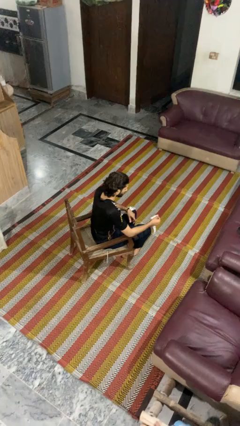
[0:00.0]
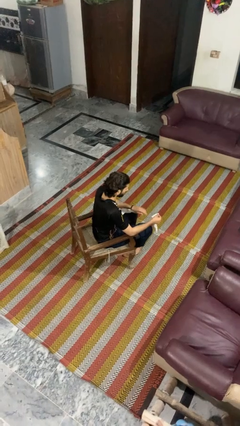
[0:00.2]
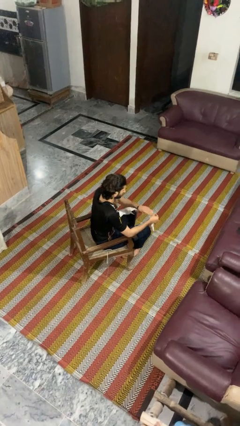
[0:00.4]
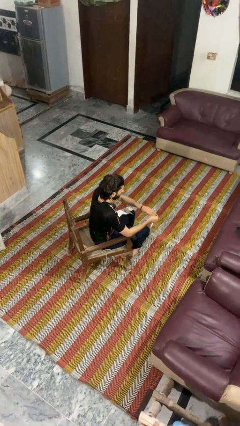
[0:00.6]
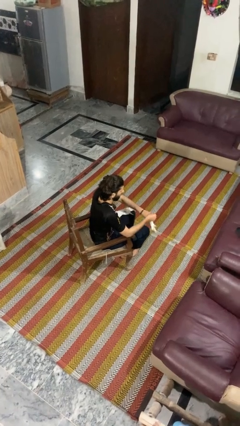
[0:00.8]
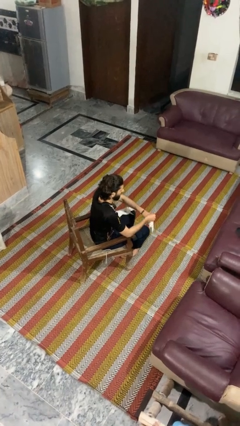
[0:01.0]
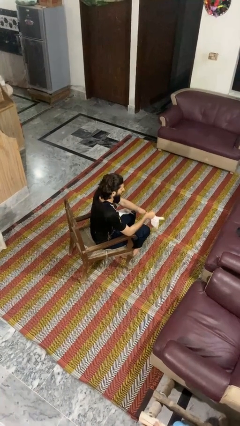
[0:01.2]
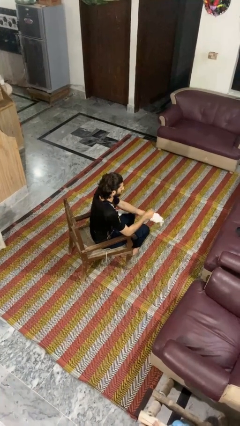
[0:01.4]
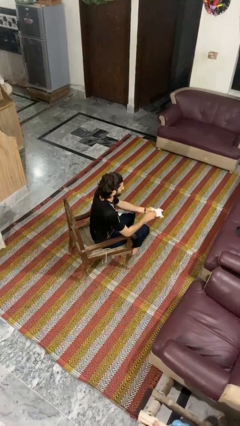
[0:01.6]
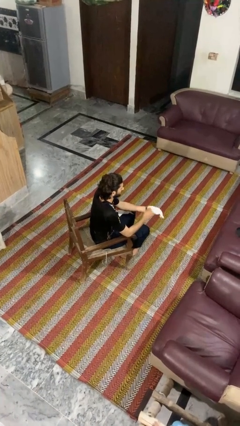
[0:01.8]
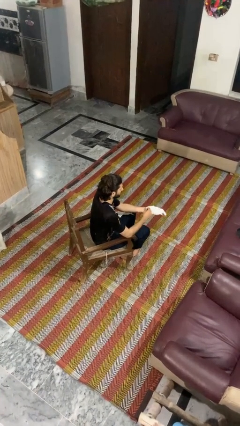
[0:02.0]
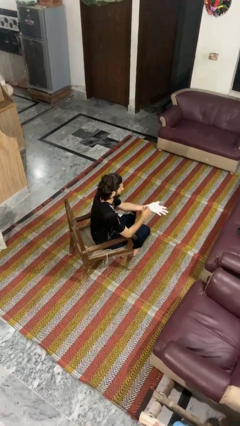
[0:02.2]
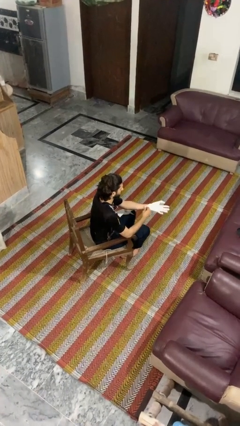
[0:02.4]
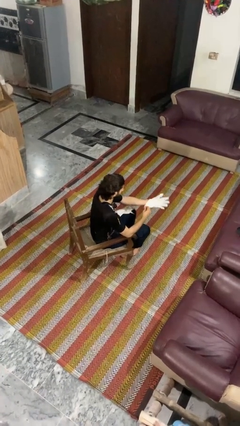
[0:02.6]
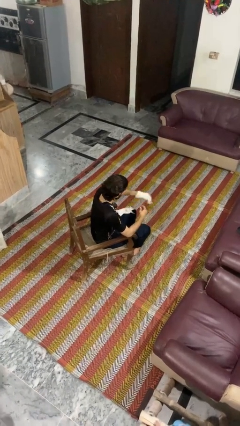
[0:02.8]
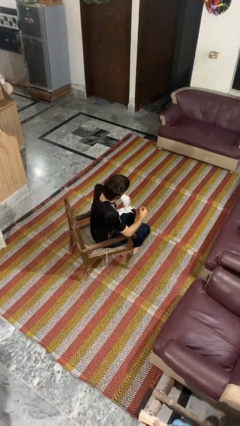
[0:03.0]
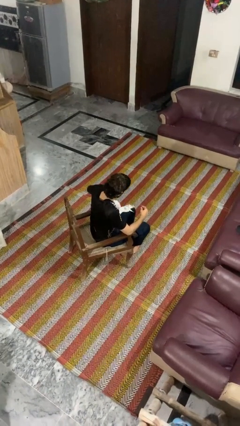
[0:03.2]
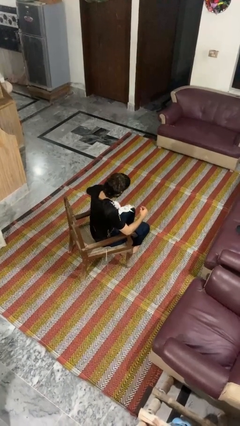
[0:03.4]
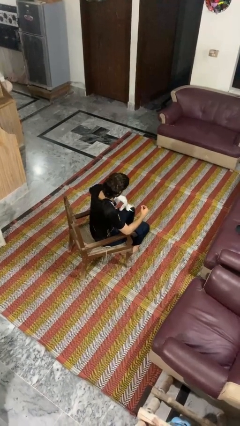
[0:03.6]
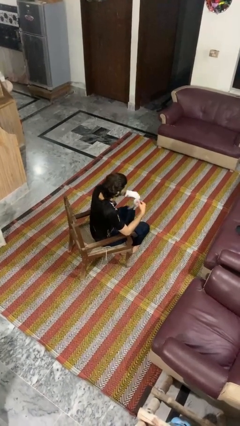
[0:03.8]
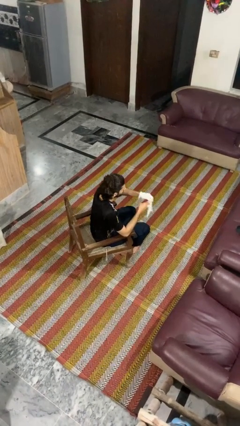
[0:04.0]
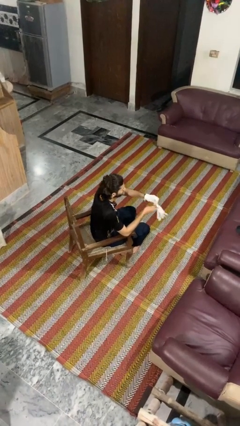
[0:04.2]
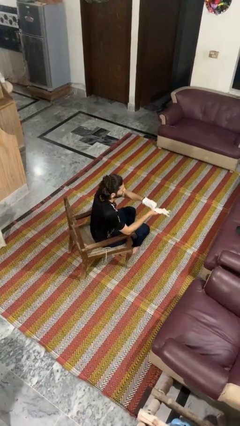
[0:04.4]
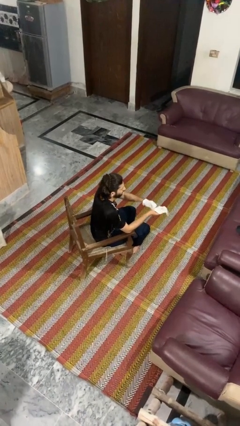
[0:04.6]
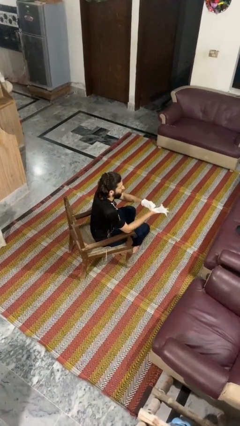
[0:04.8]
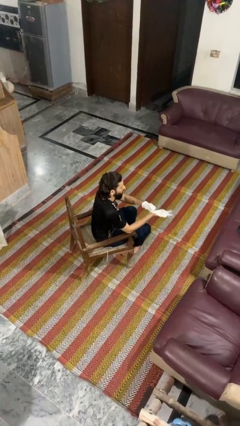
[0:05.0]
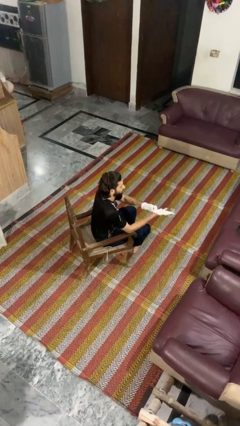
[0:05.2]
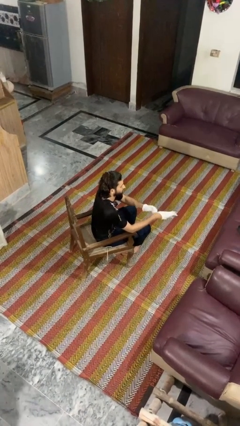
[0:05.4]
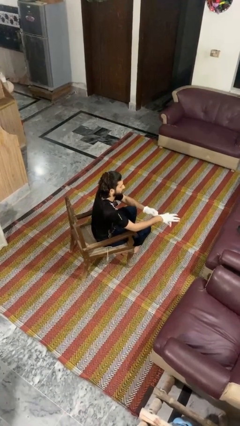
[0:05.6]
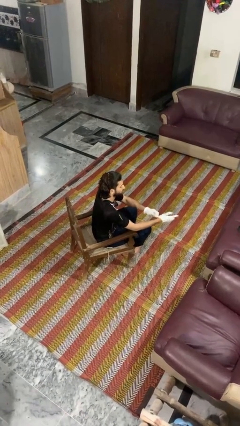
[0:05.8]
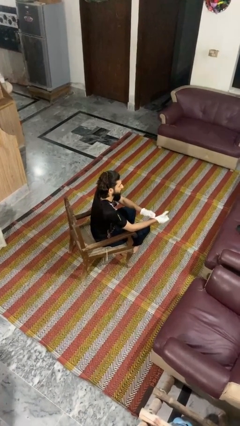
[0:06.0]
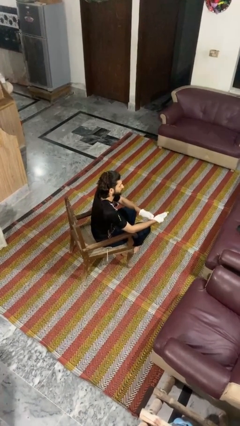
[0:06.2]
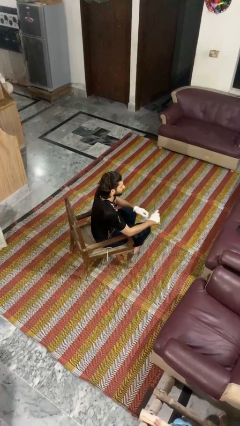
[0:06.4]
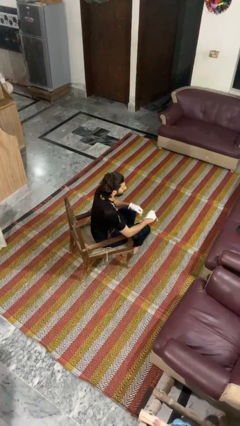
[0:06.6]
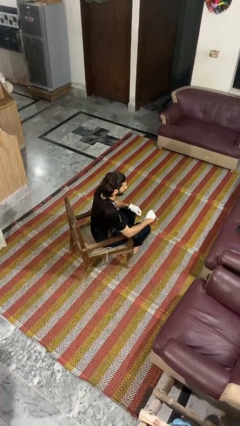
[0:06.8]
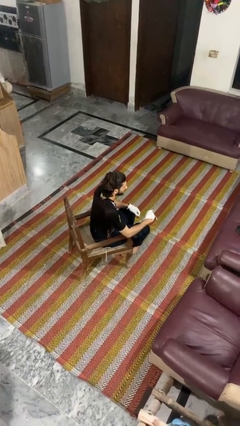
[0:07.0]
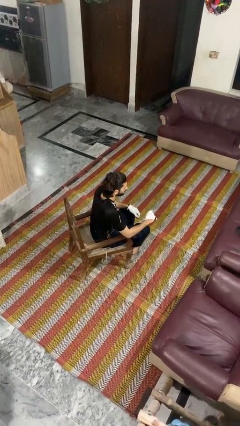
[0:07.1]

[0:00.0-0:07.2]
person puts on gloves

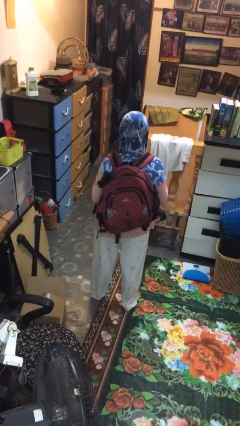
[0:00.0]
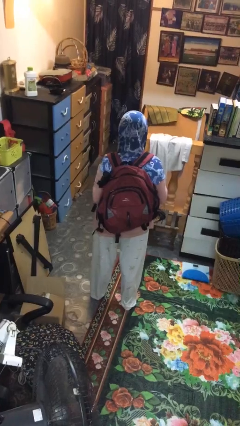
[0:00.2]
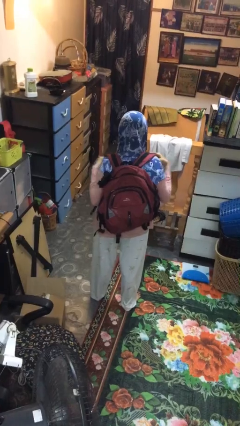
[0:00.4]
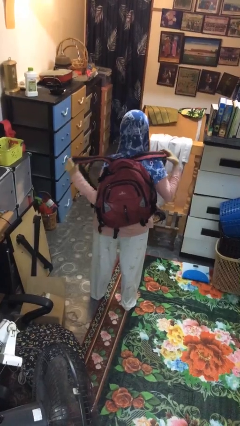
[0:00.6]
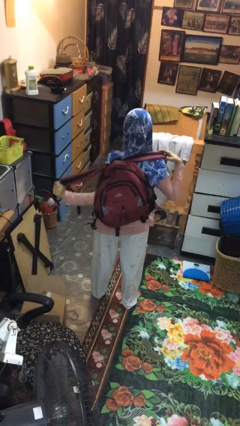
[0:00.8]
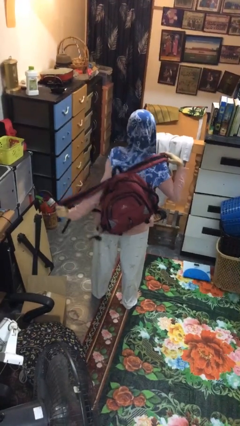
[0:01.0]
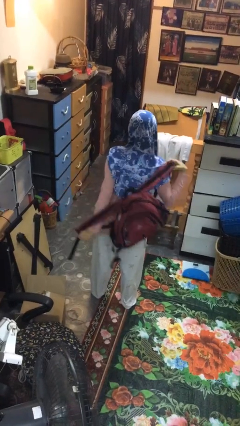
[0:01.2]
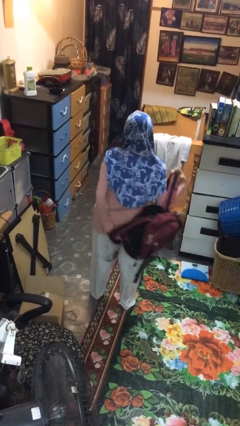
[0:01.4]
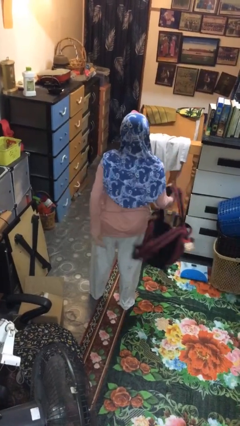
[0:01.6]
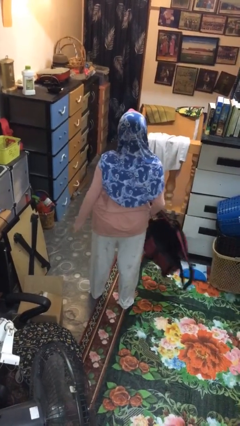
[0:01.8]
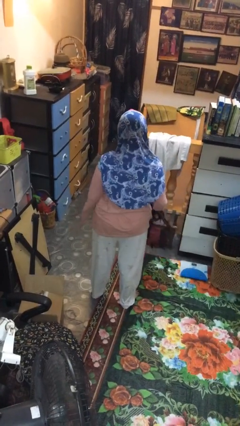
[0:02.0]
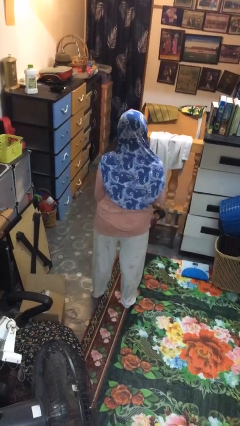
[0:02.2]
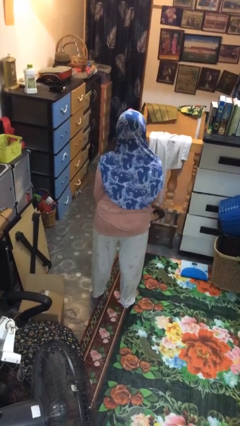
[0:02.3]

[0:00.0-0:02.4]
person takes off backpack

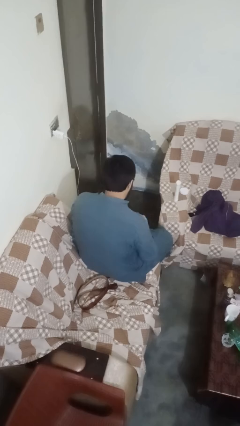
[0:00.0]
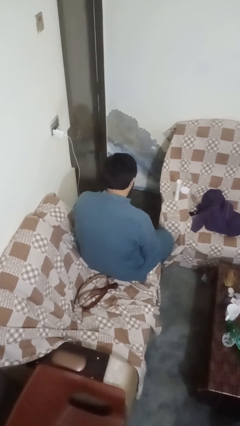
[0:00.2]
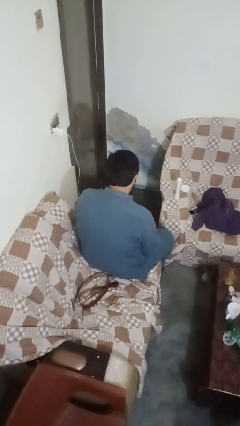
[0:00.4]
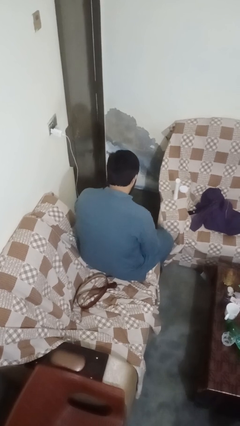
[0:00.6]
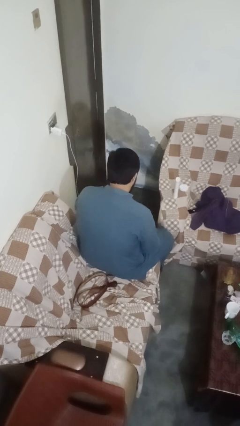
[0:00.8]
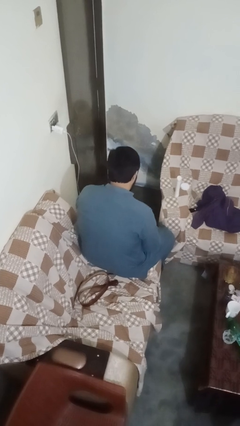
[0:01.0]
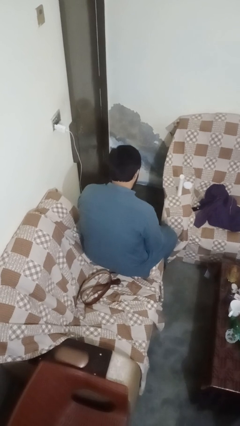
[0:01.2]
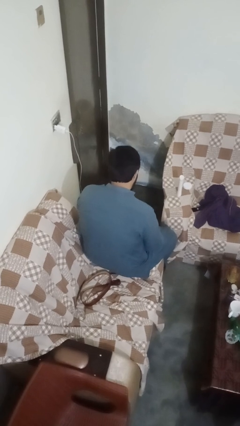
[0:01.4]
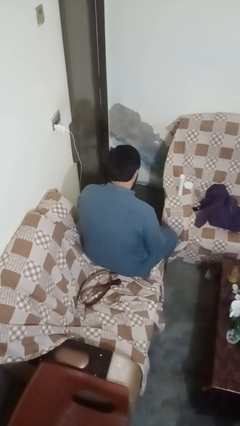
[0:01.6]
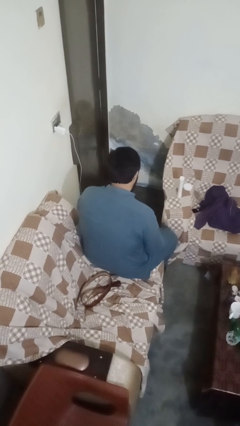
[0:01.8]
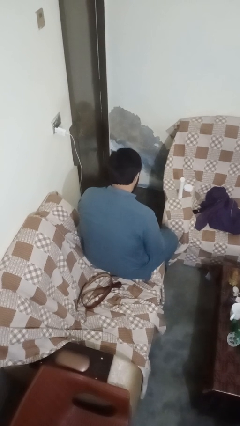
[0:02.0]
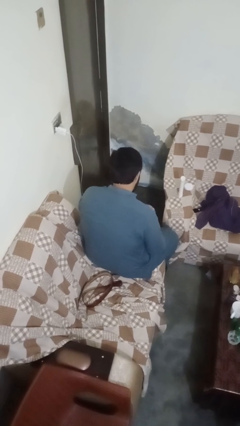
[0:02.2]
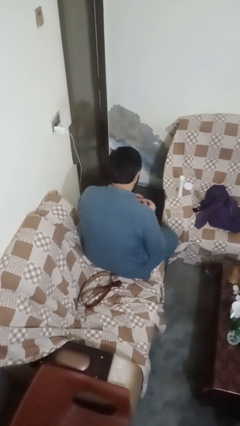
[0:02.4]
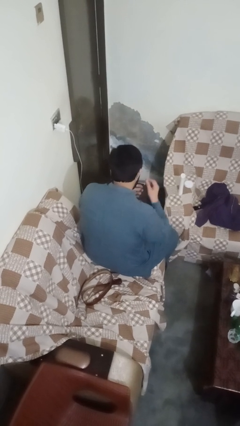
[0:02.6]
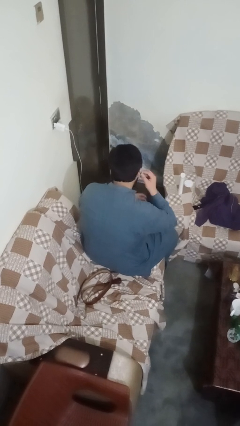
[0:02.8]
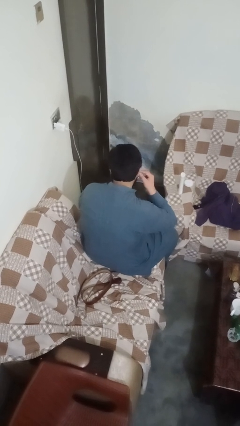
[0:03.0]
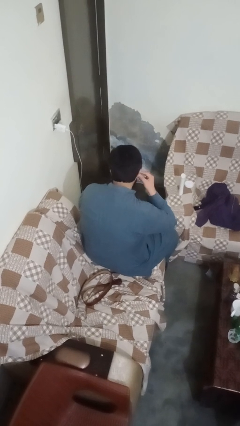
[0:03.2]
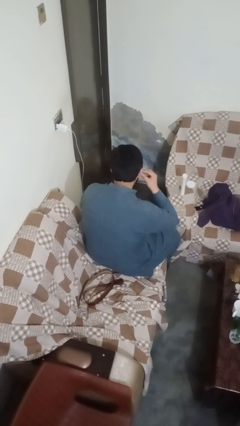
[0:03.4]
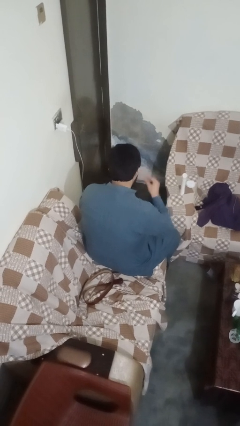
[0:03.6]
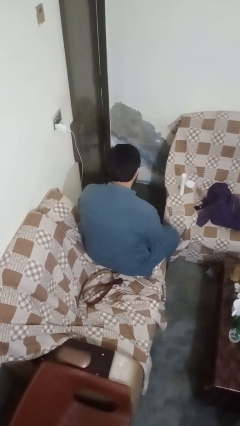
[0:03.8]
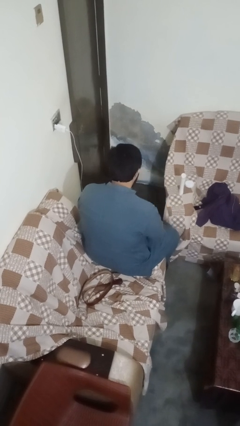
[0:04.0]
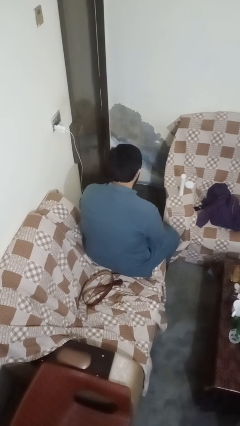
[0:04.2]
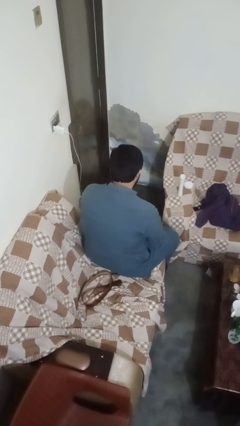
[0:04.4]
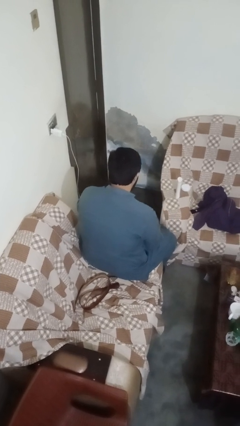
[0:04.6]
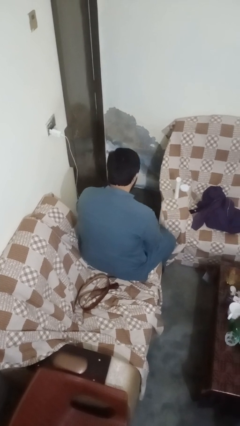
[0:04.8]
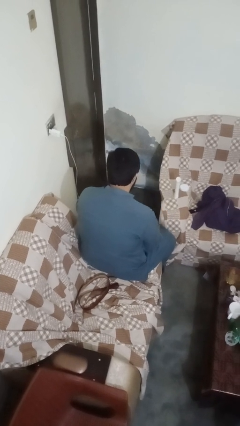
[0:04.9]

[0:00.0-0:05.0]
person takes off earrings

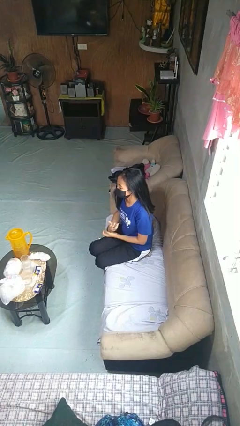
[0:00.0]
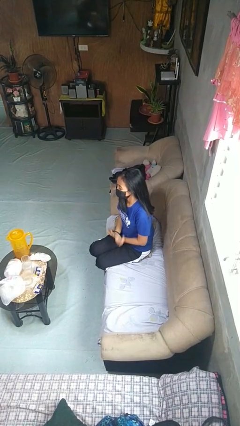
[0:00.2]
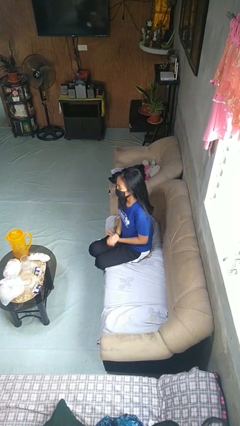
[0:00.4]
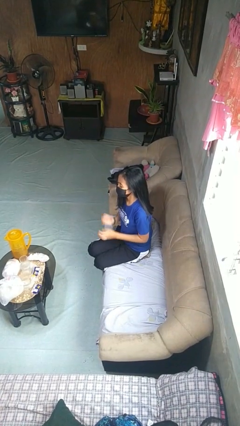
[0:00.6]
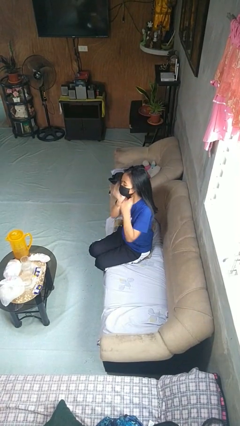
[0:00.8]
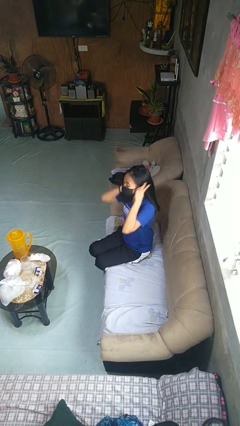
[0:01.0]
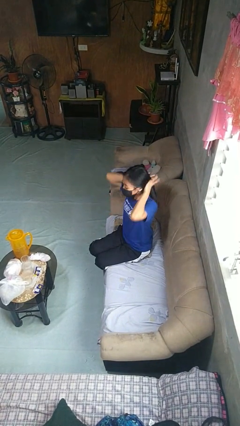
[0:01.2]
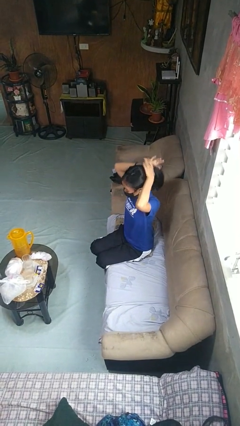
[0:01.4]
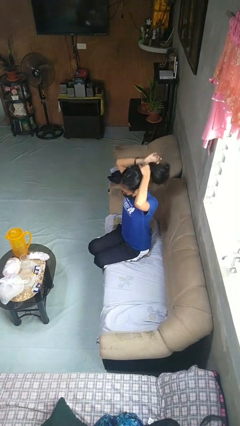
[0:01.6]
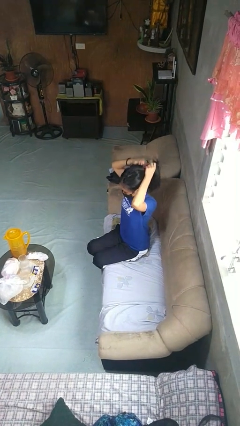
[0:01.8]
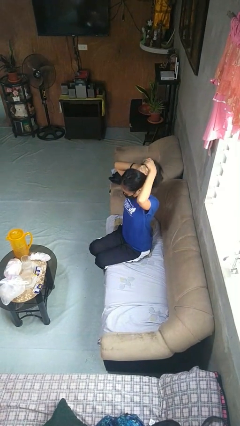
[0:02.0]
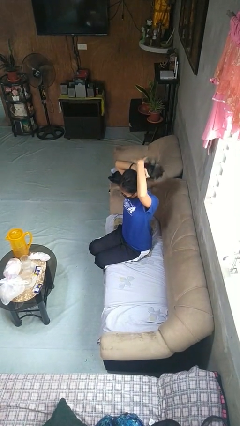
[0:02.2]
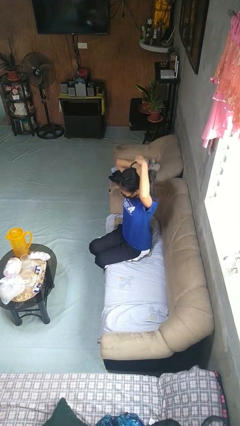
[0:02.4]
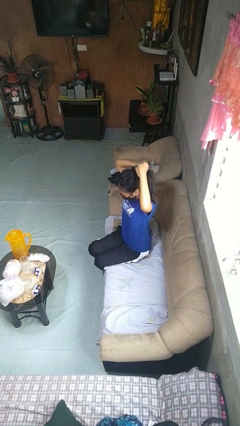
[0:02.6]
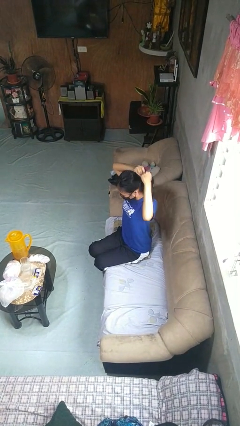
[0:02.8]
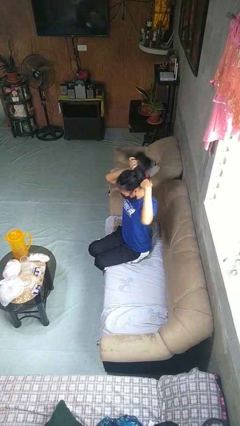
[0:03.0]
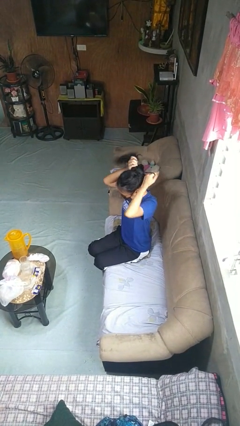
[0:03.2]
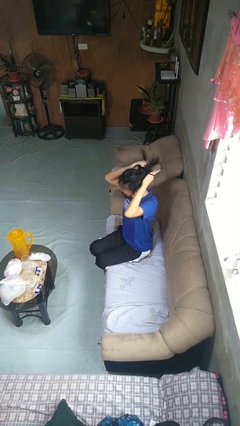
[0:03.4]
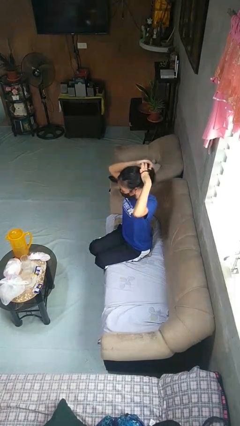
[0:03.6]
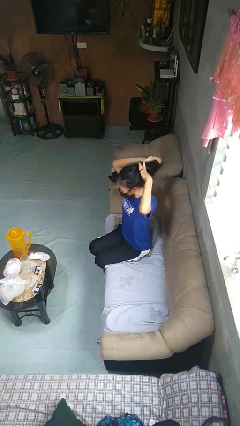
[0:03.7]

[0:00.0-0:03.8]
person puts hair in ponytail
